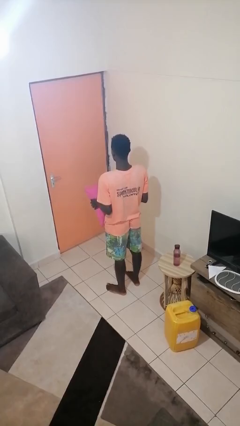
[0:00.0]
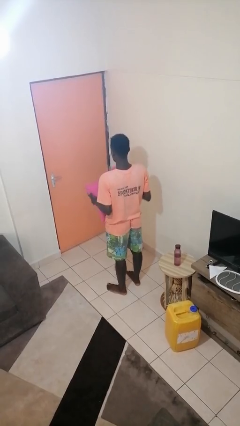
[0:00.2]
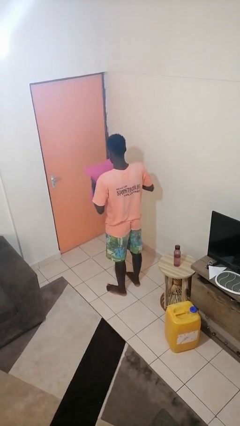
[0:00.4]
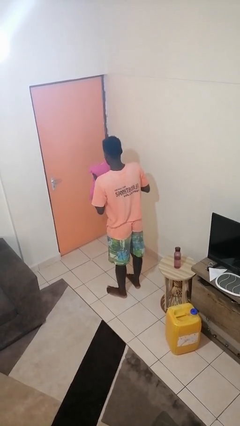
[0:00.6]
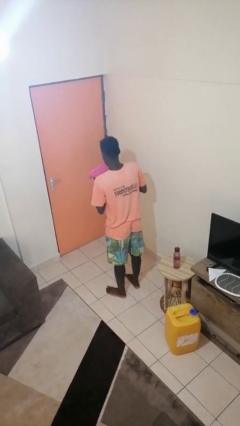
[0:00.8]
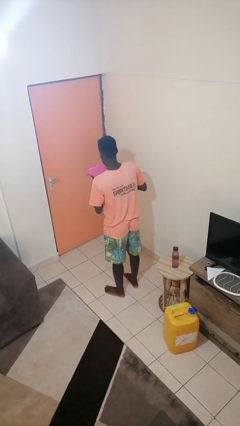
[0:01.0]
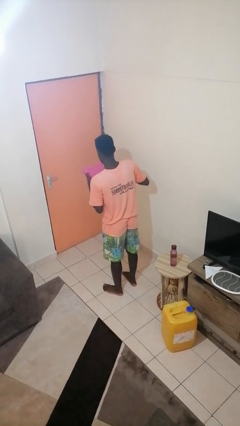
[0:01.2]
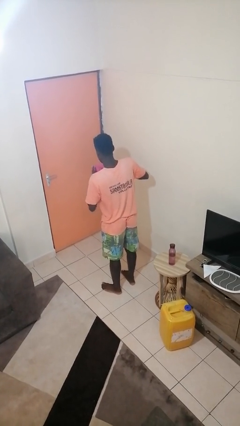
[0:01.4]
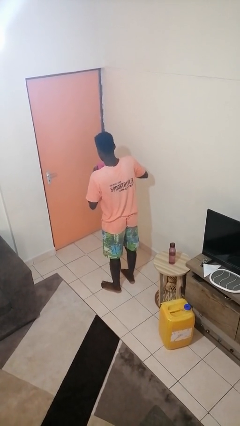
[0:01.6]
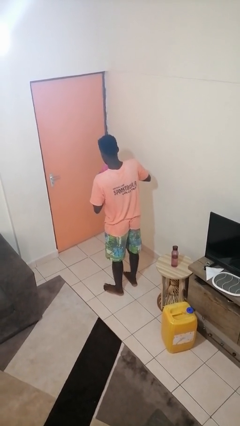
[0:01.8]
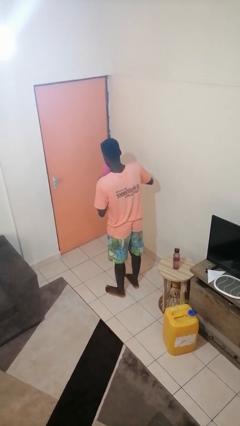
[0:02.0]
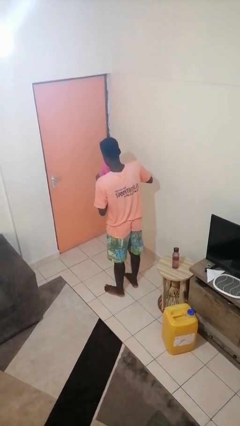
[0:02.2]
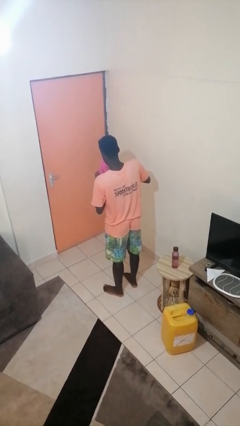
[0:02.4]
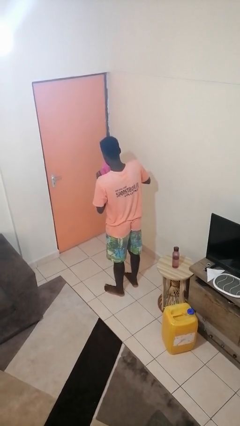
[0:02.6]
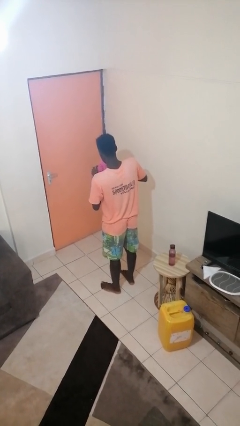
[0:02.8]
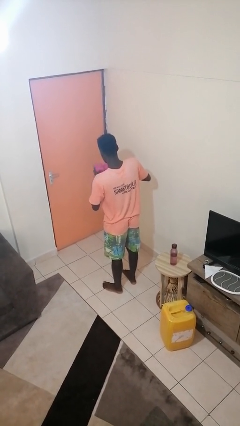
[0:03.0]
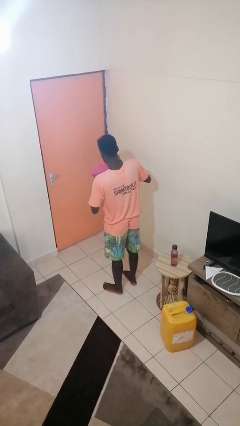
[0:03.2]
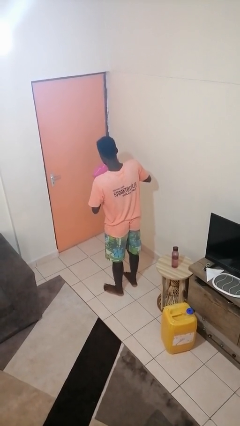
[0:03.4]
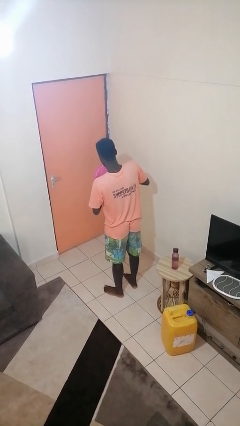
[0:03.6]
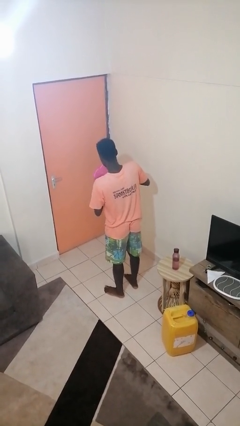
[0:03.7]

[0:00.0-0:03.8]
person squeezes object

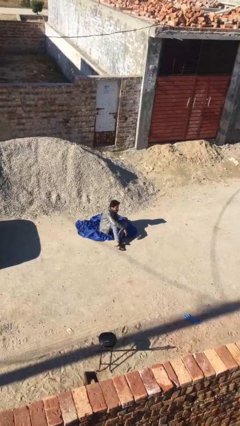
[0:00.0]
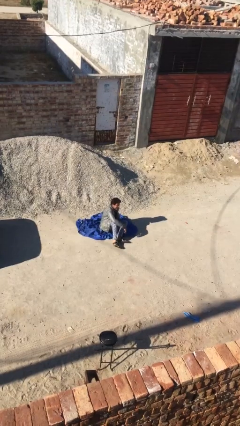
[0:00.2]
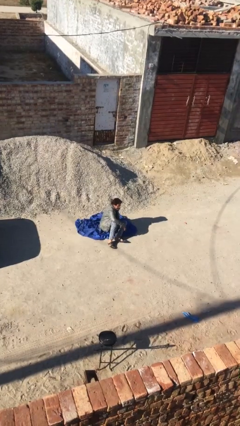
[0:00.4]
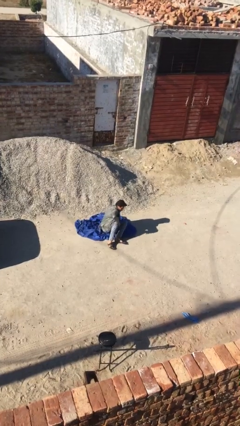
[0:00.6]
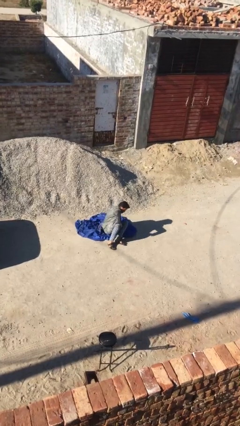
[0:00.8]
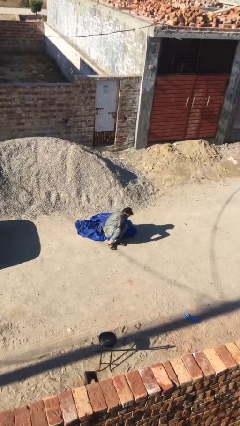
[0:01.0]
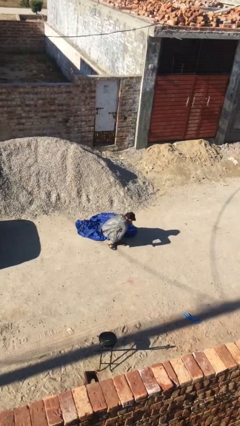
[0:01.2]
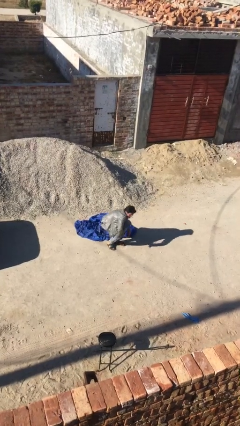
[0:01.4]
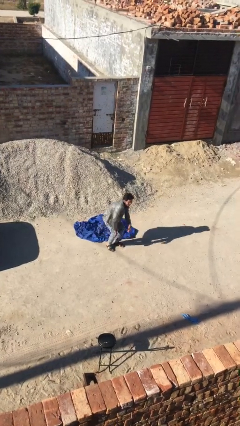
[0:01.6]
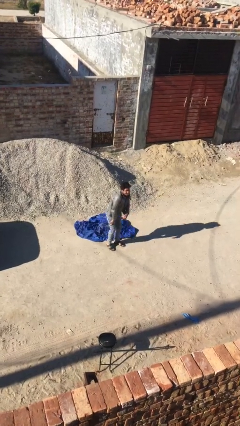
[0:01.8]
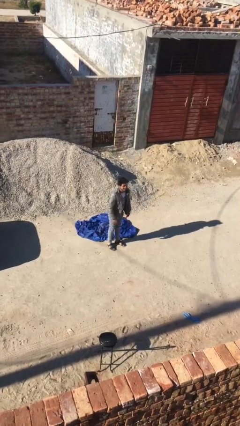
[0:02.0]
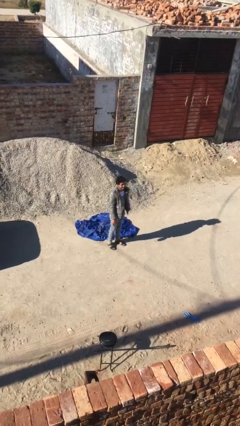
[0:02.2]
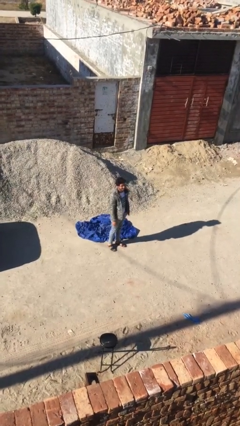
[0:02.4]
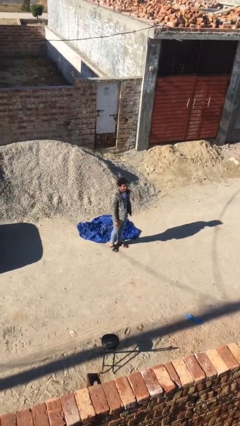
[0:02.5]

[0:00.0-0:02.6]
person stands up

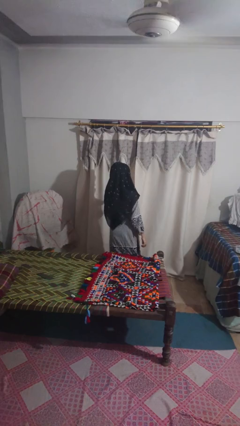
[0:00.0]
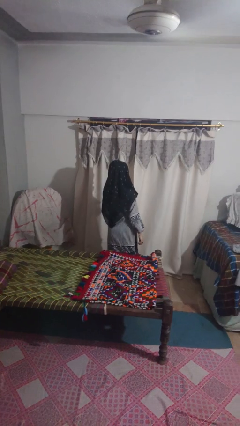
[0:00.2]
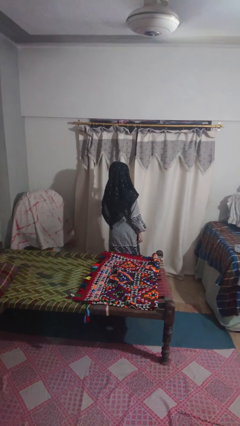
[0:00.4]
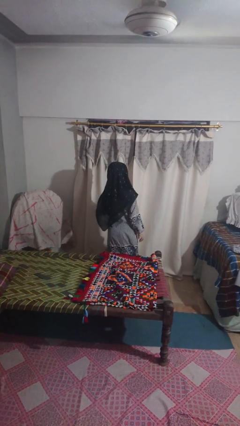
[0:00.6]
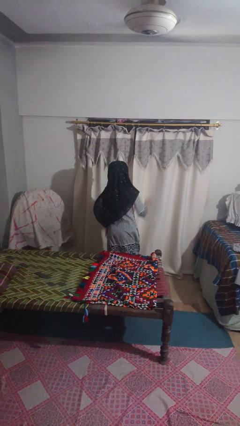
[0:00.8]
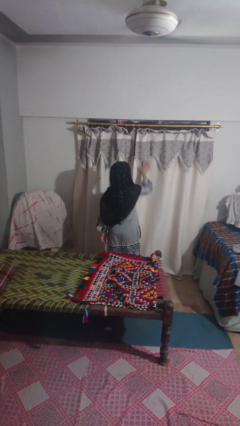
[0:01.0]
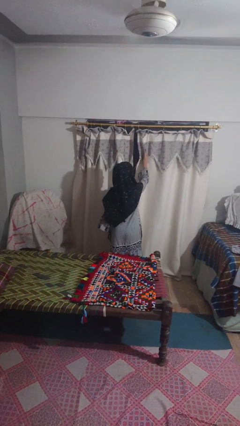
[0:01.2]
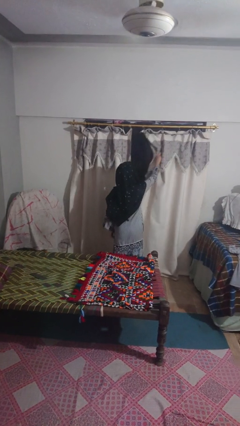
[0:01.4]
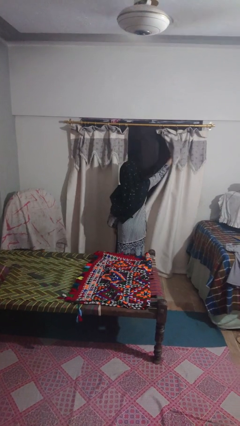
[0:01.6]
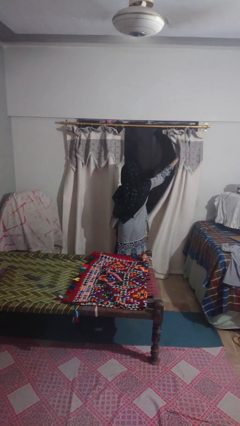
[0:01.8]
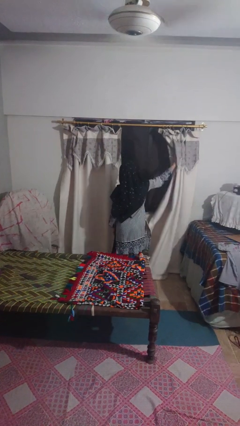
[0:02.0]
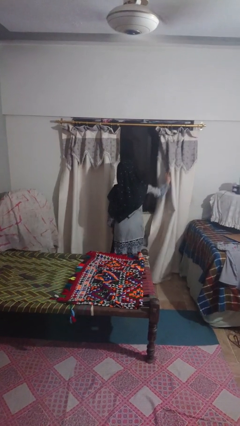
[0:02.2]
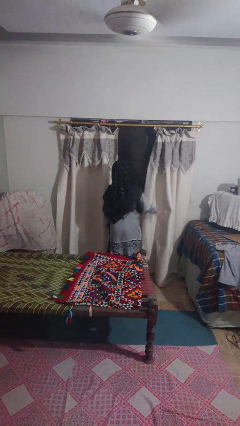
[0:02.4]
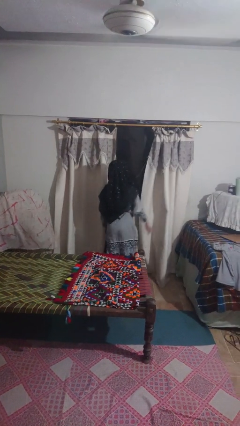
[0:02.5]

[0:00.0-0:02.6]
person opens curtains

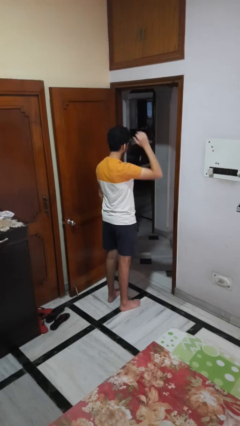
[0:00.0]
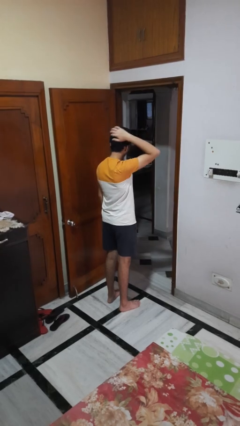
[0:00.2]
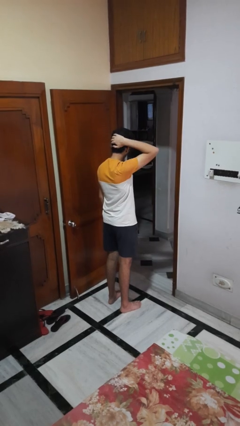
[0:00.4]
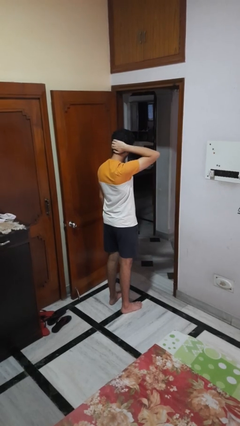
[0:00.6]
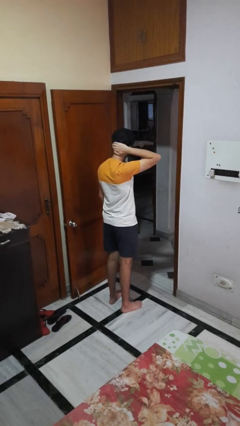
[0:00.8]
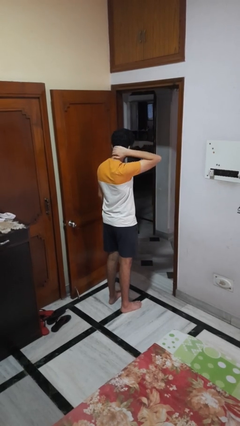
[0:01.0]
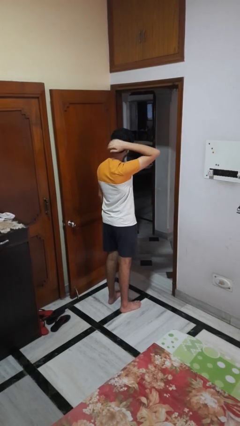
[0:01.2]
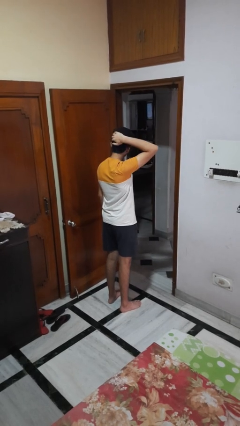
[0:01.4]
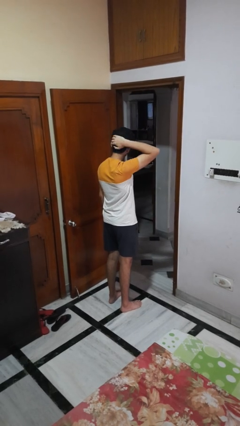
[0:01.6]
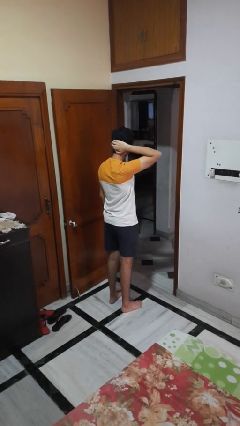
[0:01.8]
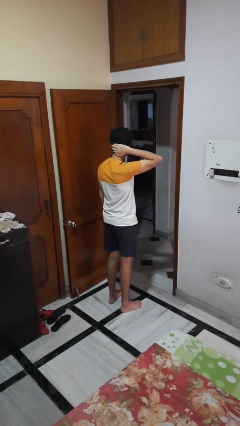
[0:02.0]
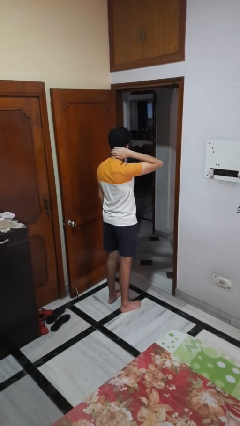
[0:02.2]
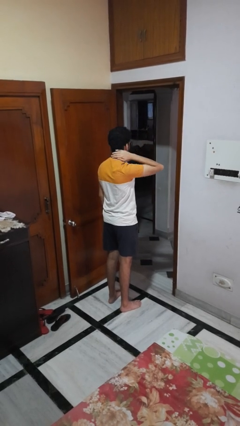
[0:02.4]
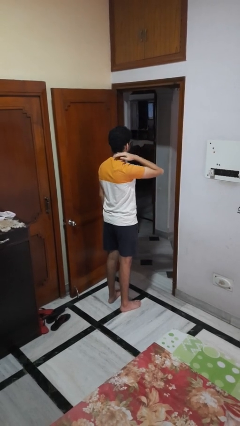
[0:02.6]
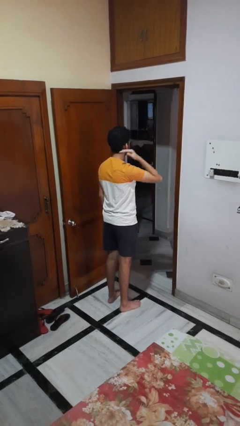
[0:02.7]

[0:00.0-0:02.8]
person strokes hair

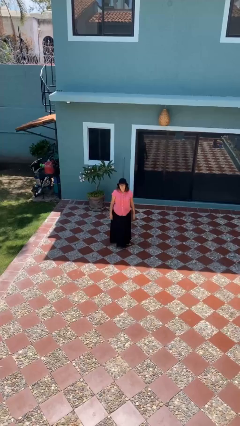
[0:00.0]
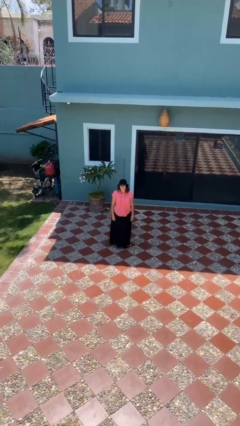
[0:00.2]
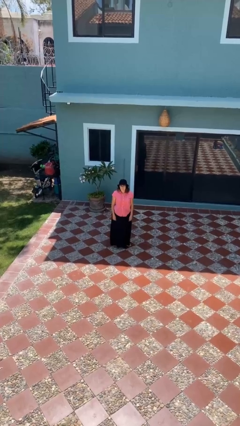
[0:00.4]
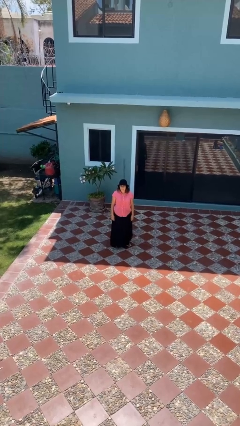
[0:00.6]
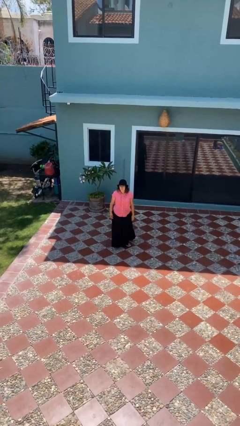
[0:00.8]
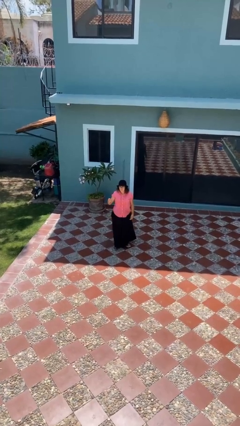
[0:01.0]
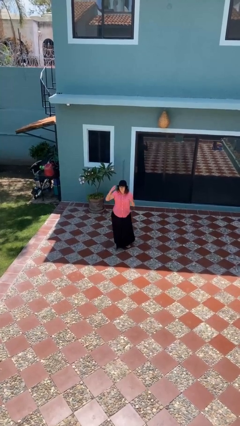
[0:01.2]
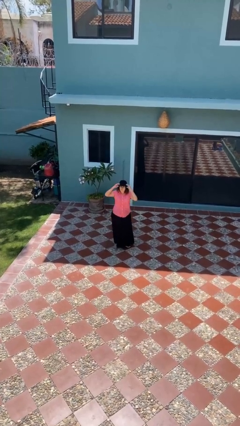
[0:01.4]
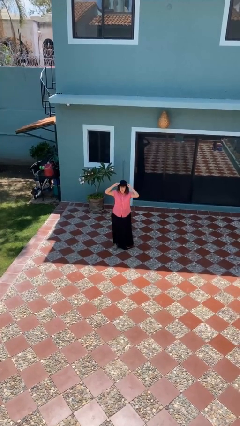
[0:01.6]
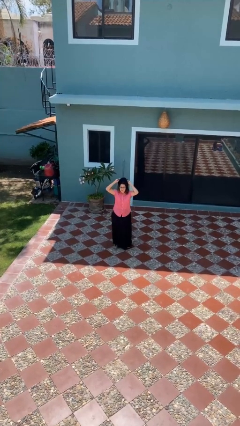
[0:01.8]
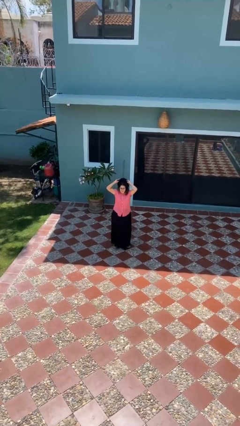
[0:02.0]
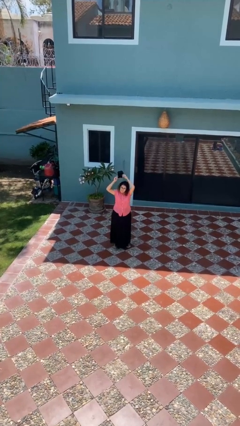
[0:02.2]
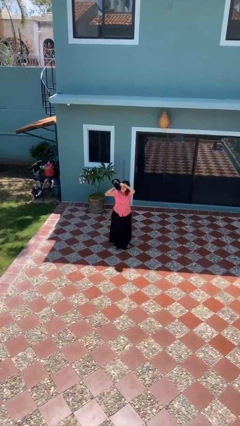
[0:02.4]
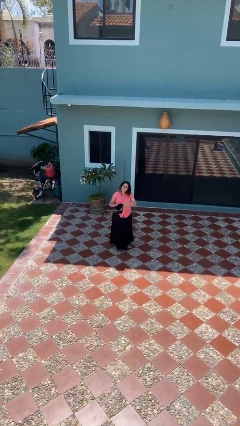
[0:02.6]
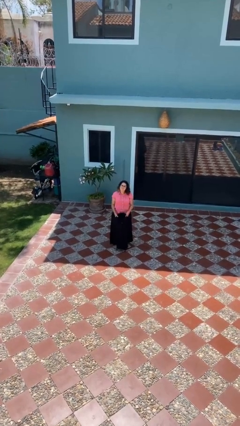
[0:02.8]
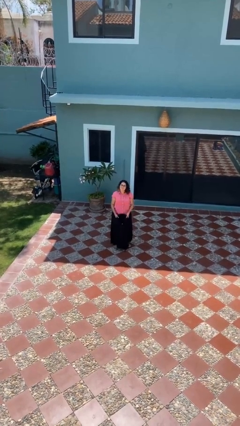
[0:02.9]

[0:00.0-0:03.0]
person takes off hat

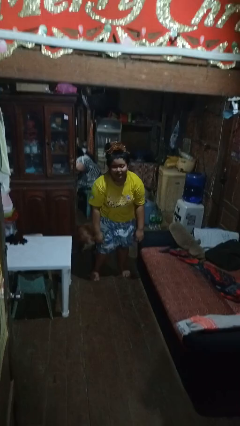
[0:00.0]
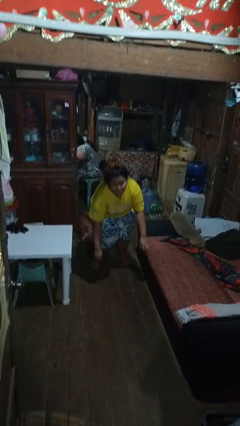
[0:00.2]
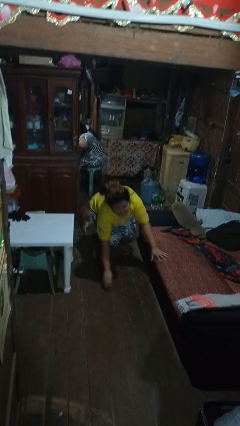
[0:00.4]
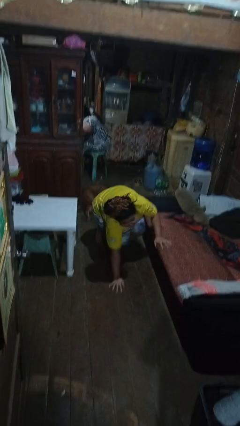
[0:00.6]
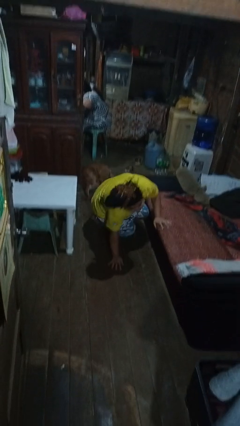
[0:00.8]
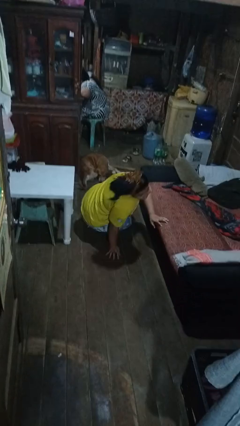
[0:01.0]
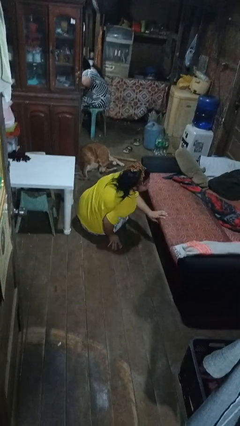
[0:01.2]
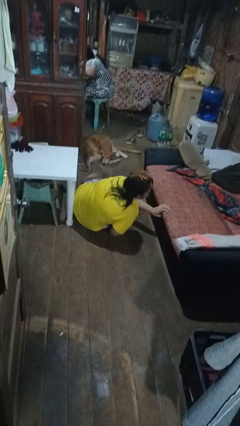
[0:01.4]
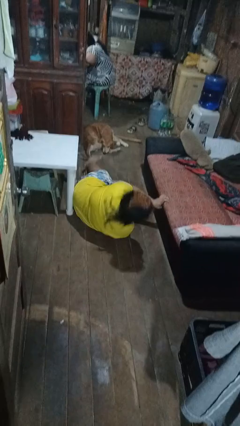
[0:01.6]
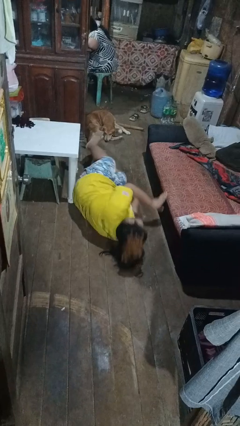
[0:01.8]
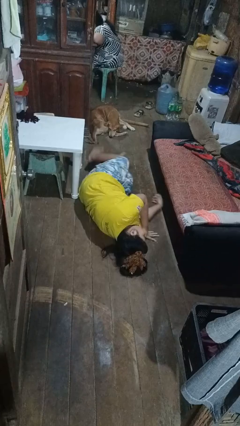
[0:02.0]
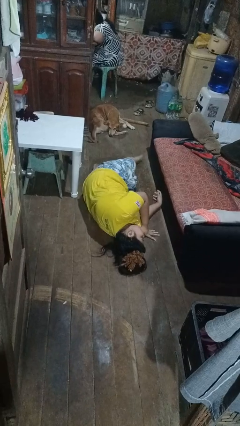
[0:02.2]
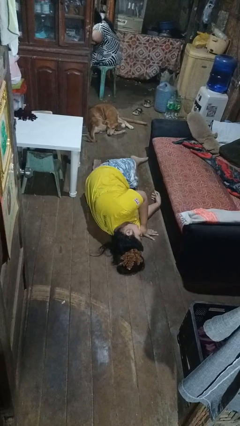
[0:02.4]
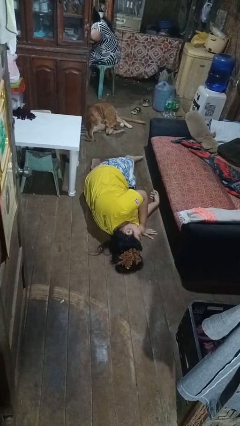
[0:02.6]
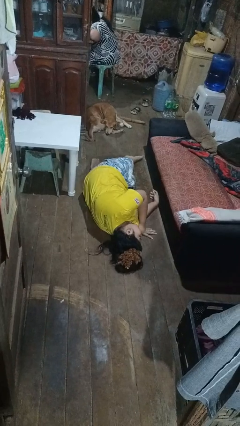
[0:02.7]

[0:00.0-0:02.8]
person falls while standing
